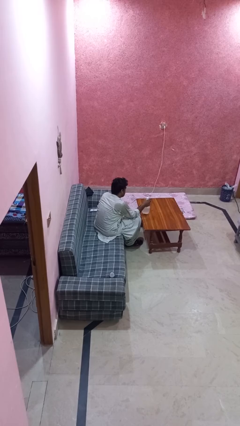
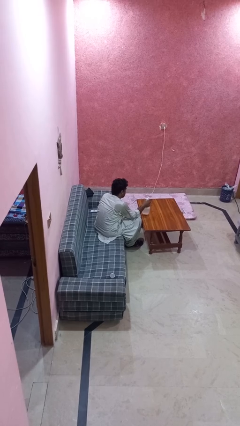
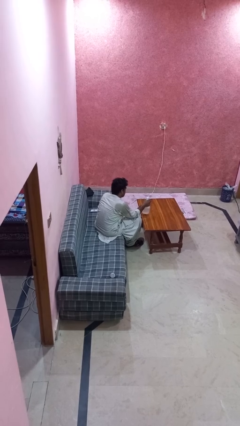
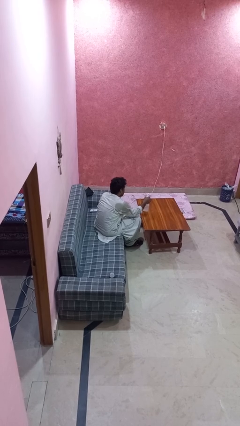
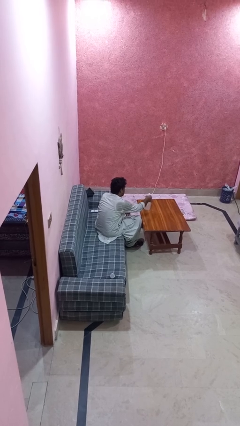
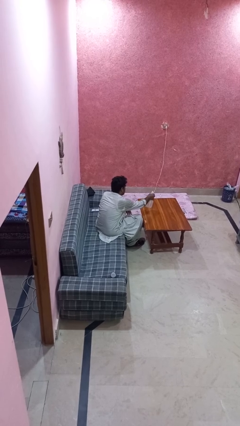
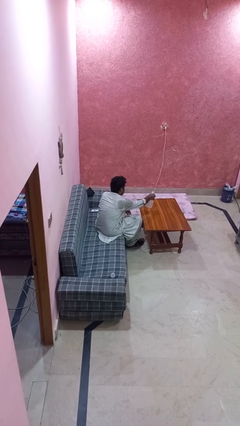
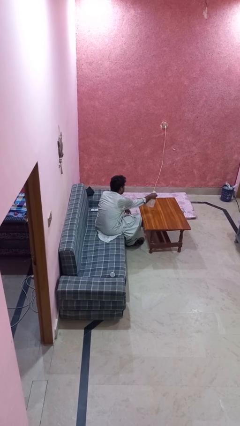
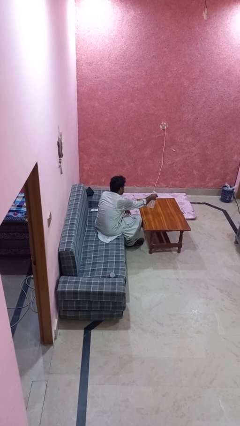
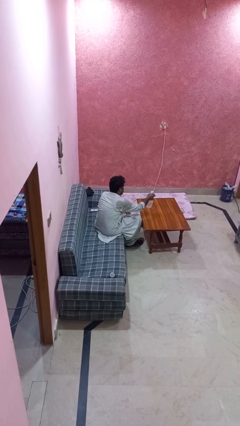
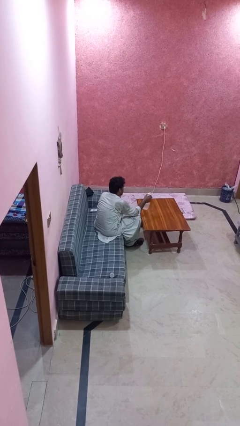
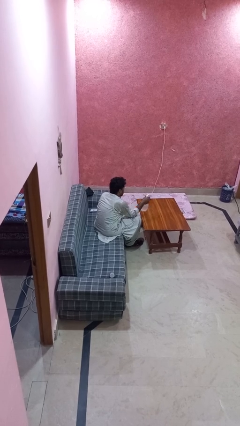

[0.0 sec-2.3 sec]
person sprays from bottle

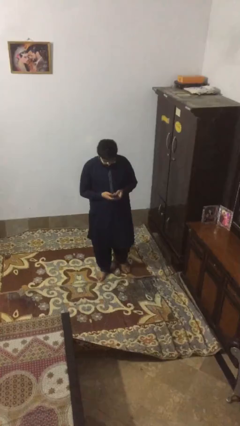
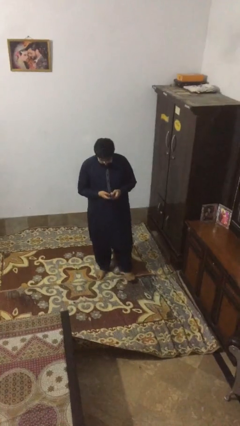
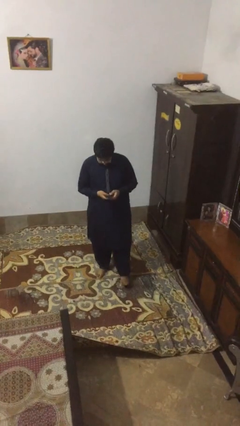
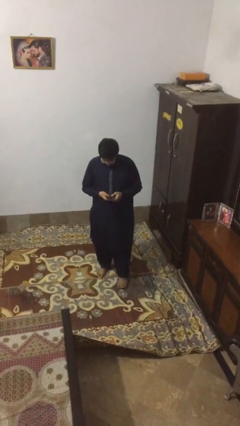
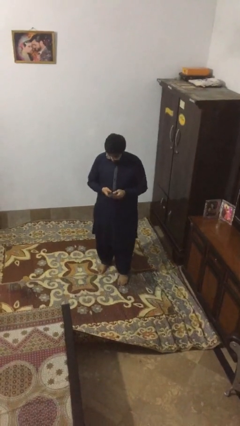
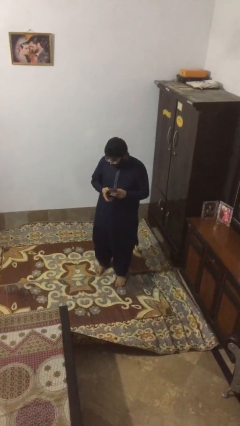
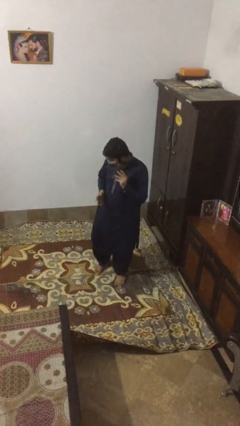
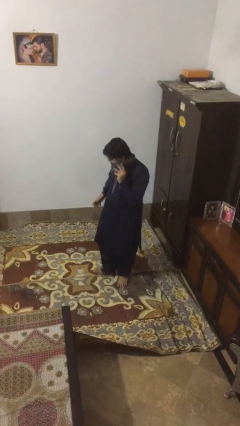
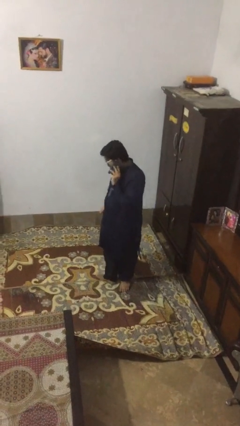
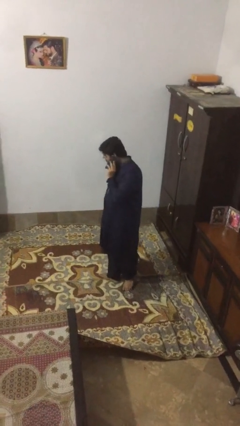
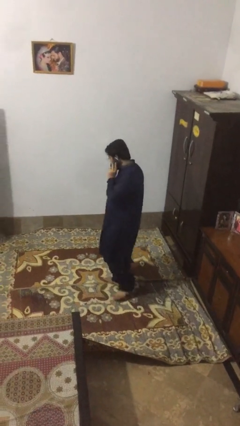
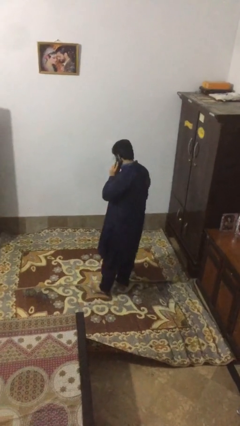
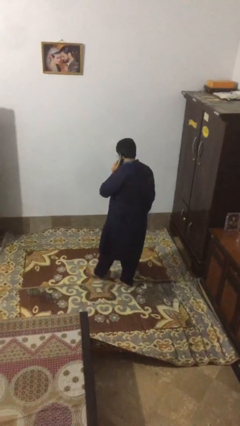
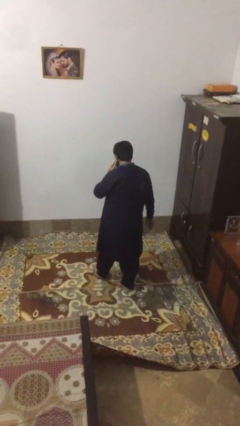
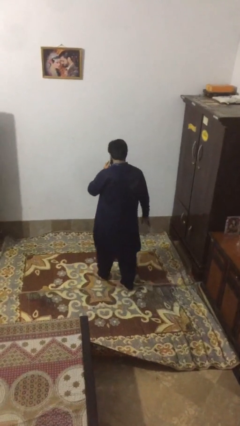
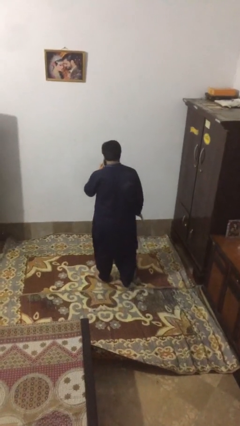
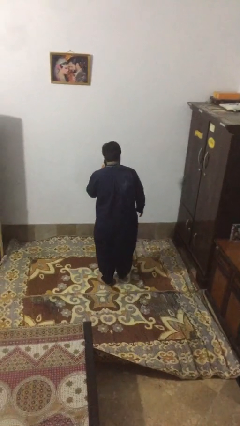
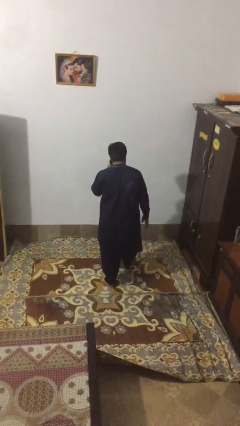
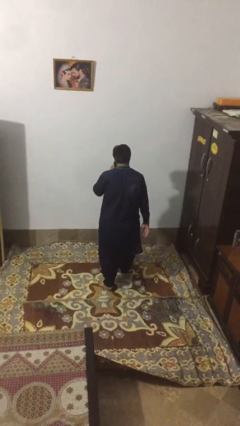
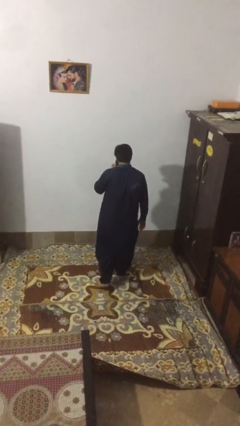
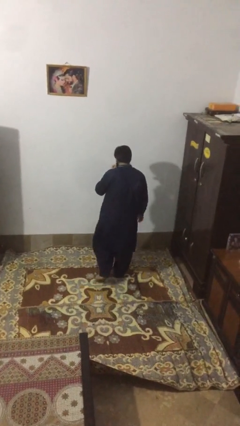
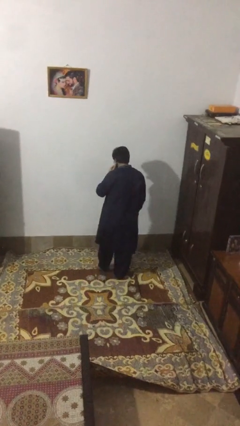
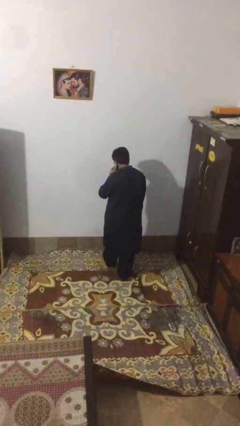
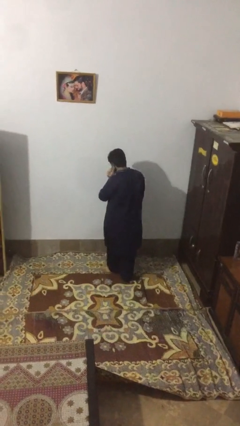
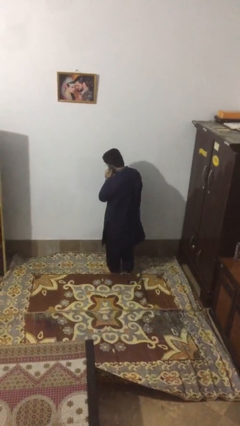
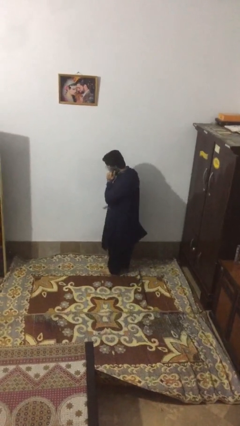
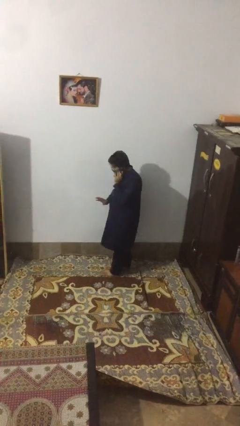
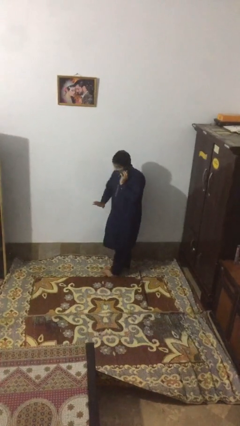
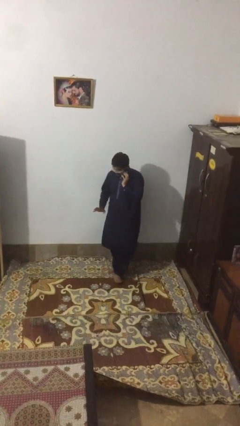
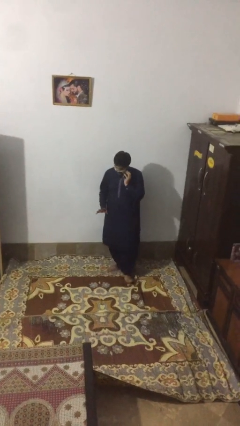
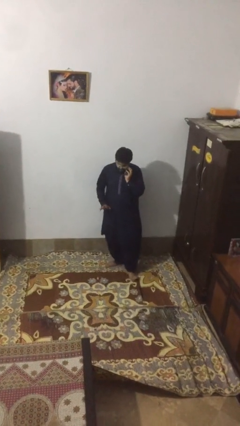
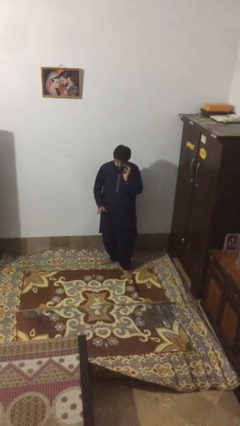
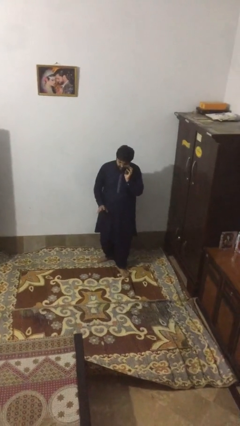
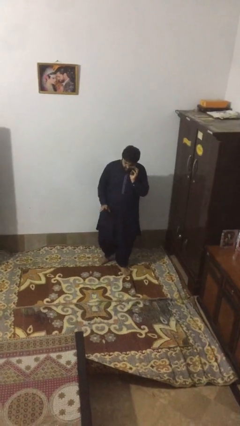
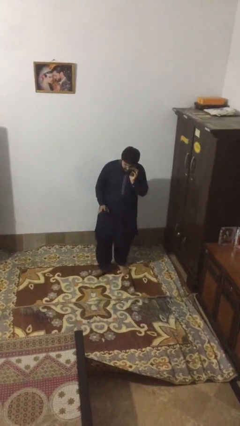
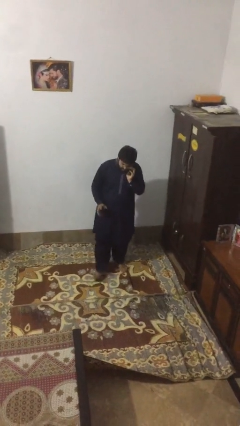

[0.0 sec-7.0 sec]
person talks on phone

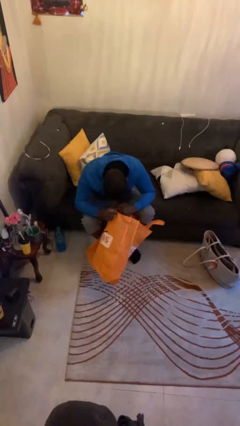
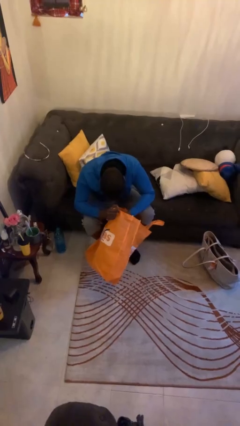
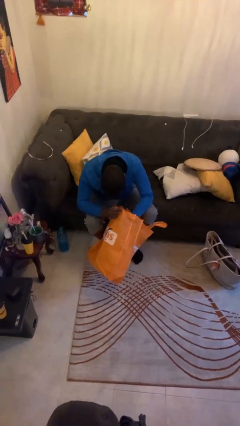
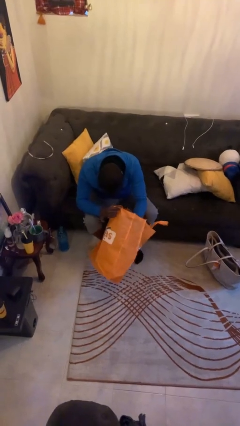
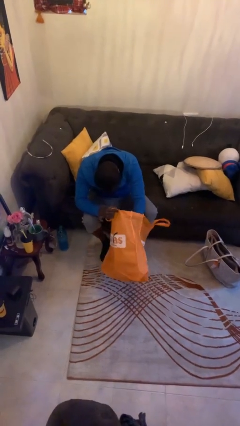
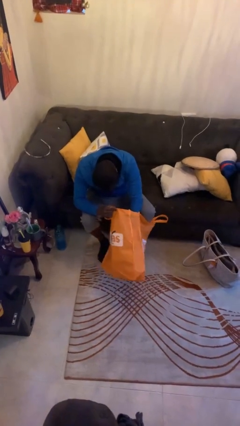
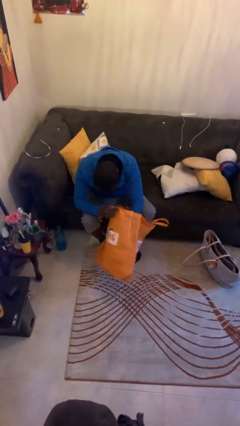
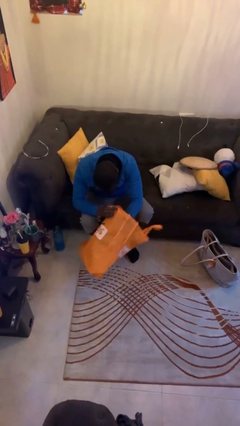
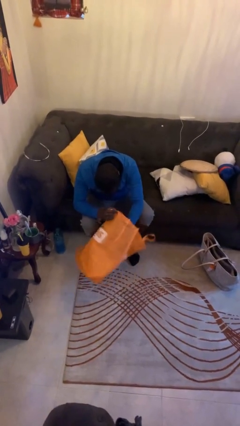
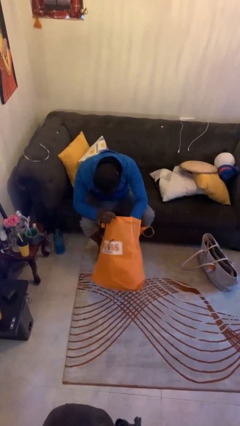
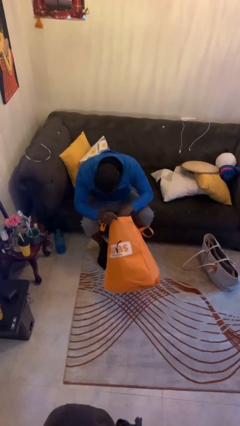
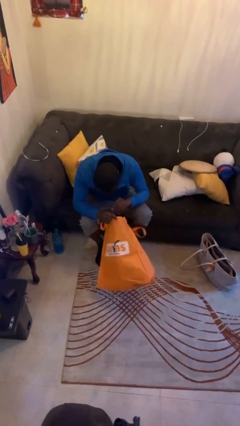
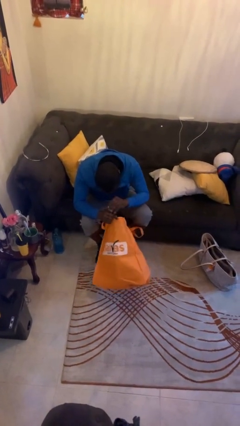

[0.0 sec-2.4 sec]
person searches in bag

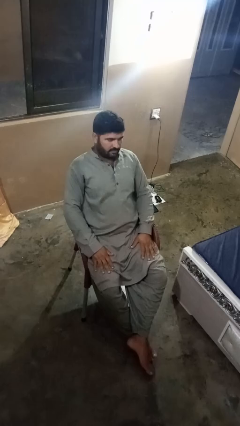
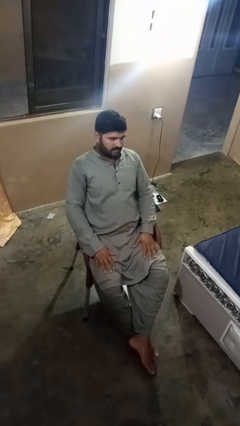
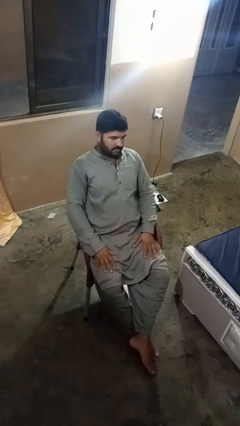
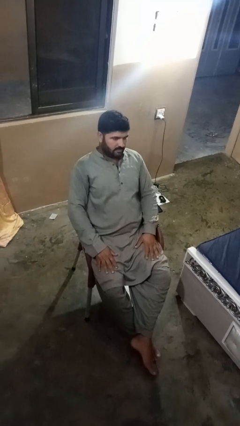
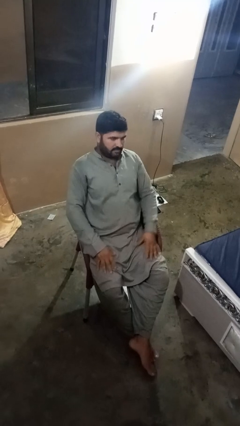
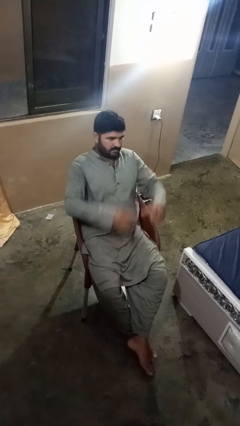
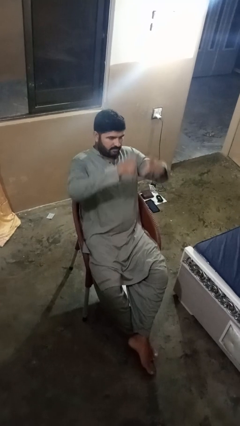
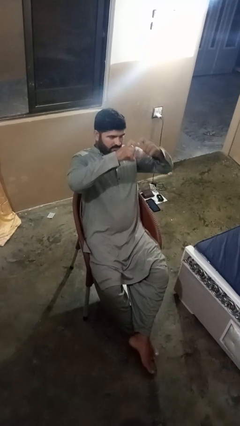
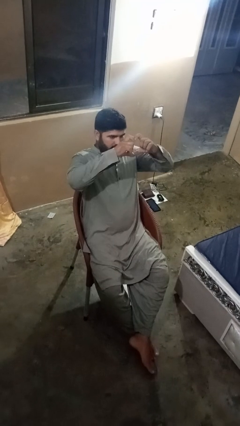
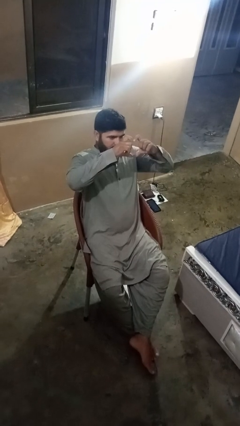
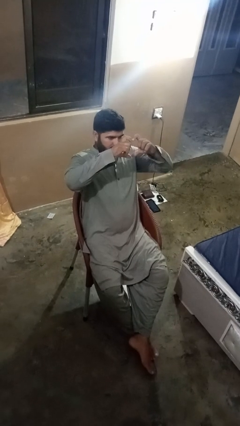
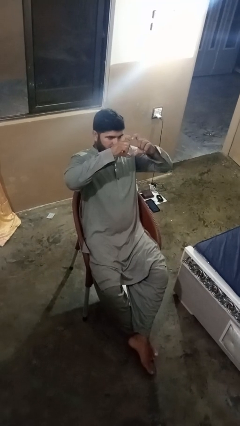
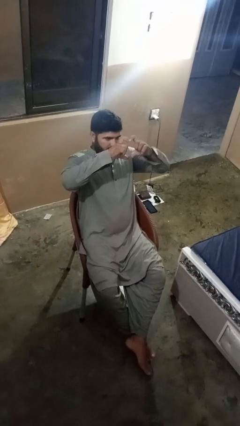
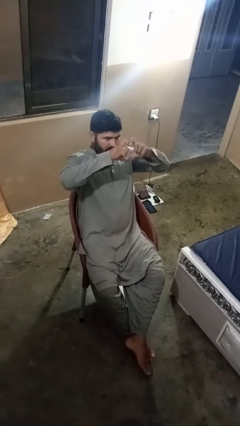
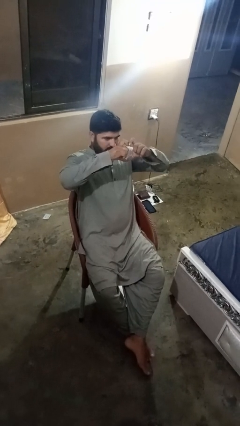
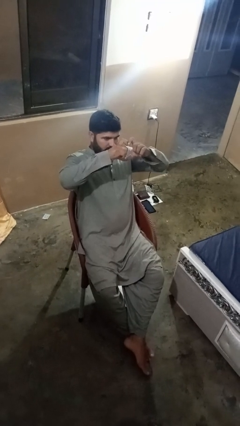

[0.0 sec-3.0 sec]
person gestures heart

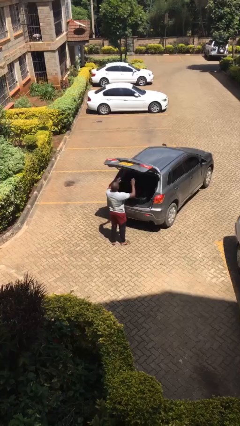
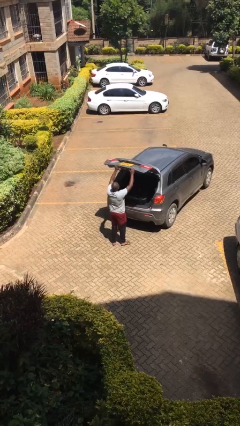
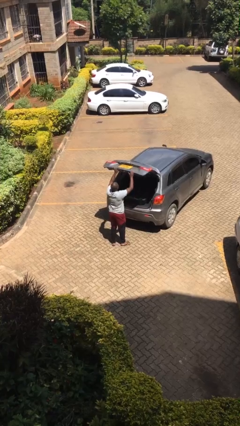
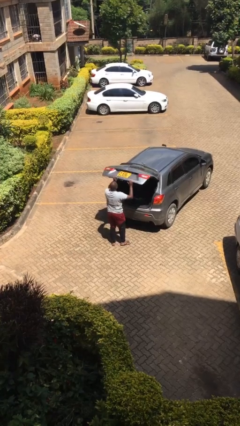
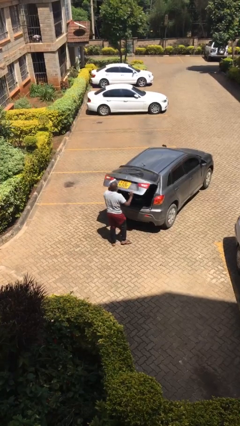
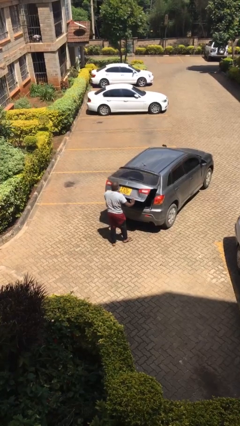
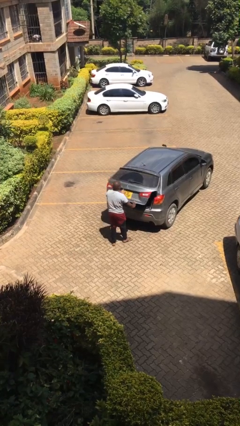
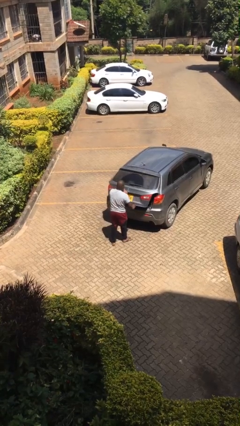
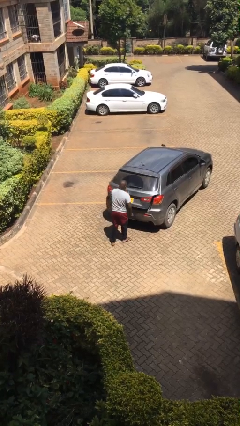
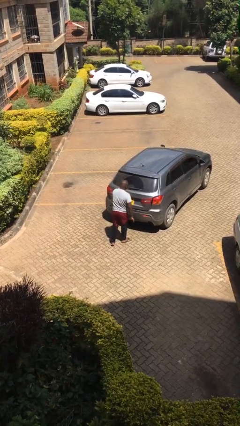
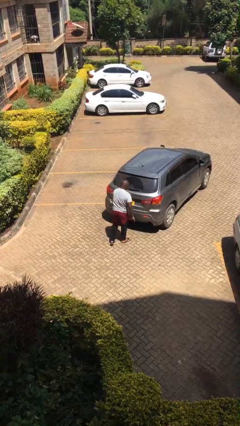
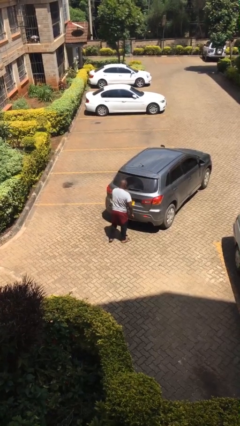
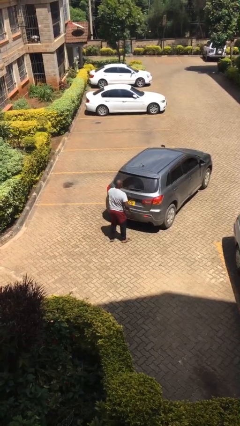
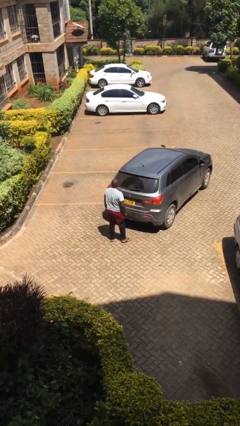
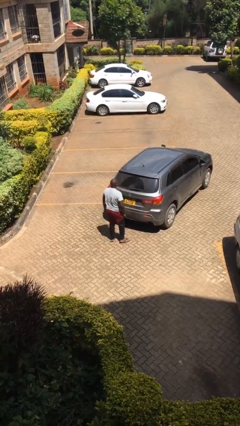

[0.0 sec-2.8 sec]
person closes car trunk

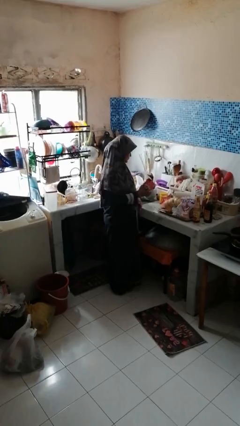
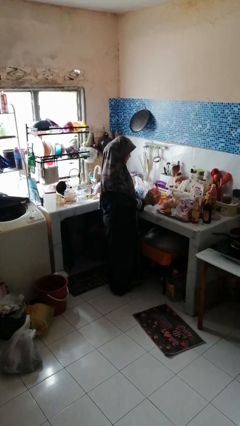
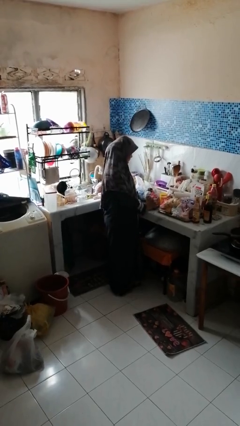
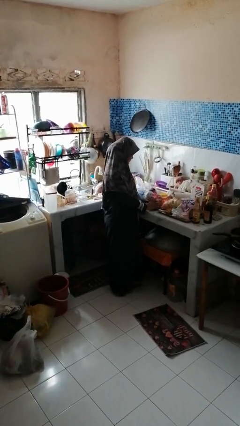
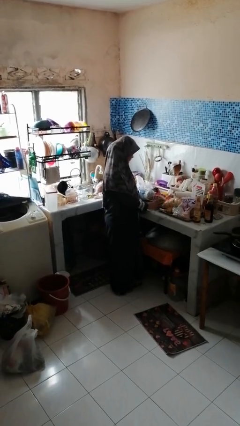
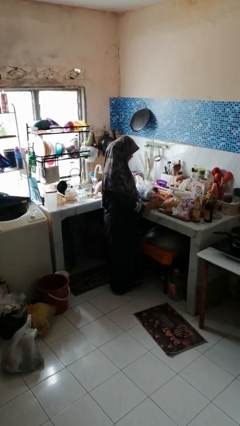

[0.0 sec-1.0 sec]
person puts down object on countertop
